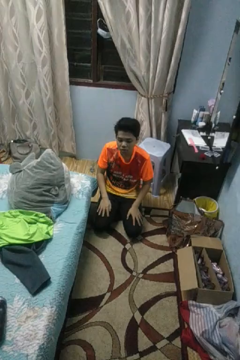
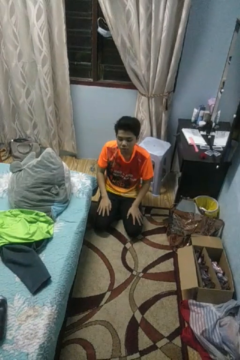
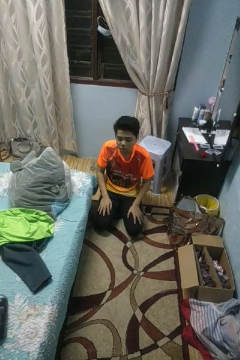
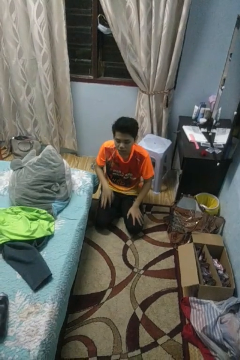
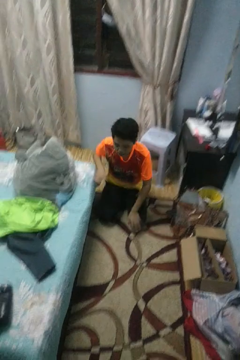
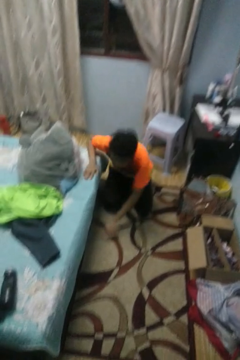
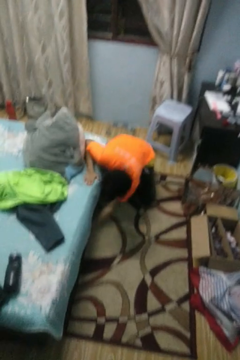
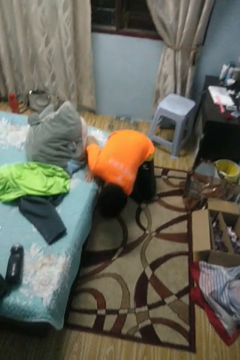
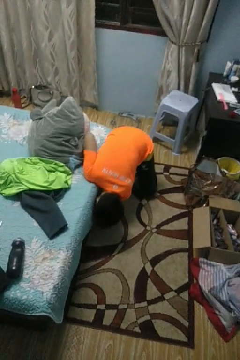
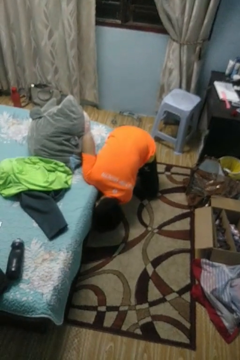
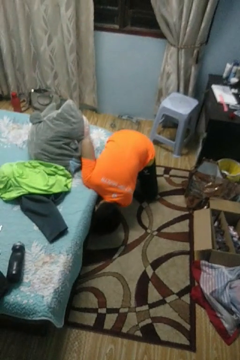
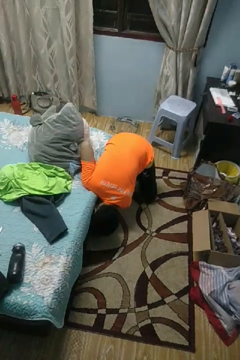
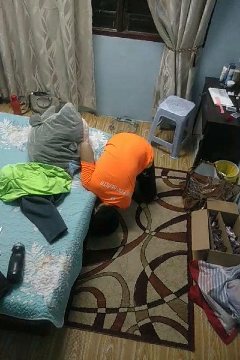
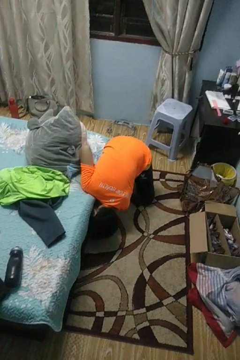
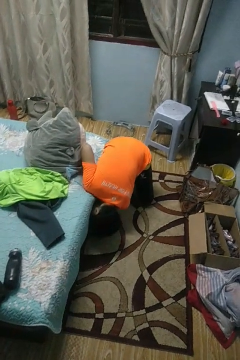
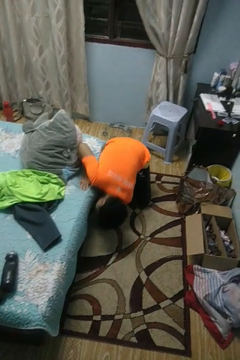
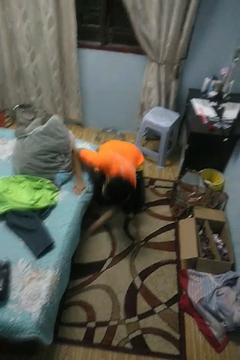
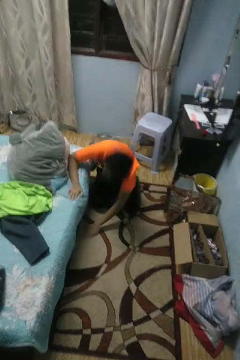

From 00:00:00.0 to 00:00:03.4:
person searches under bed

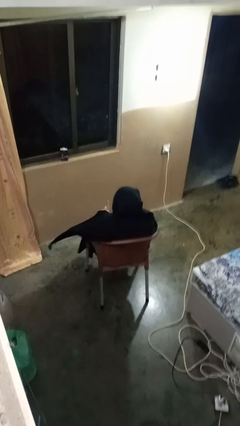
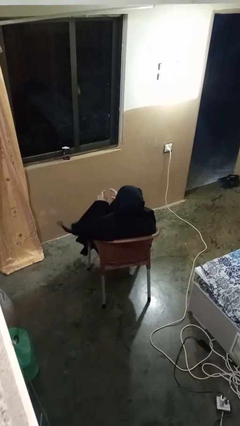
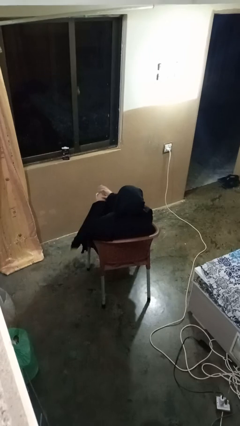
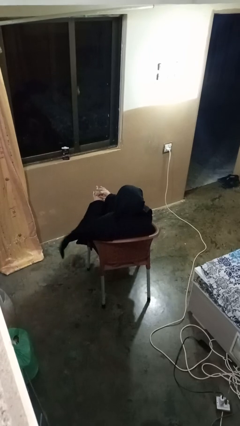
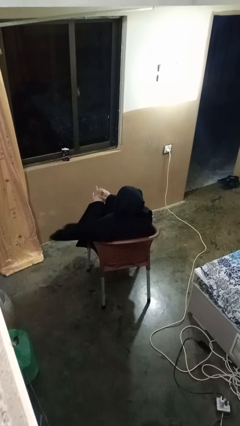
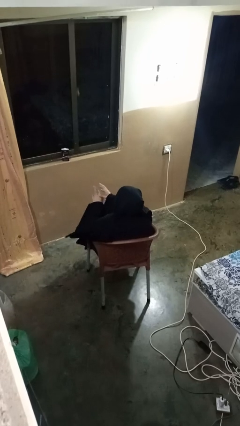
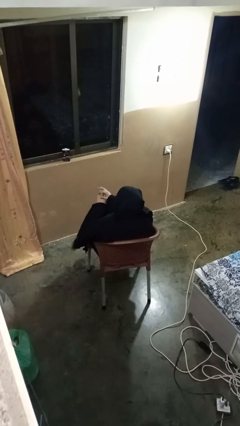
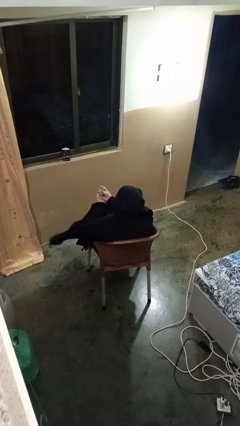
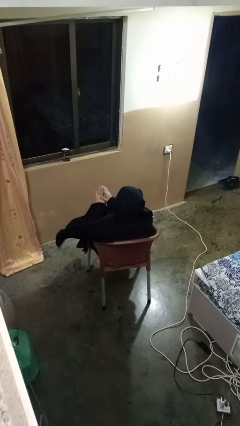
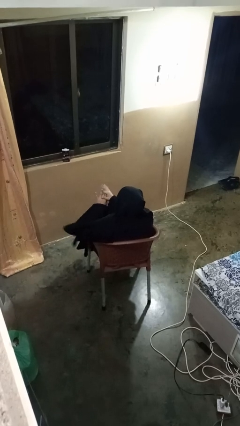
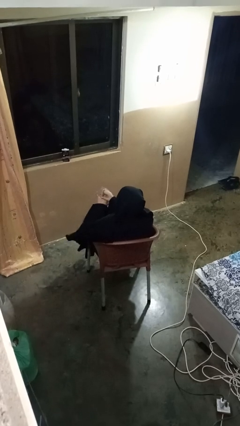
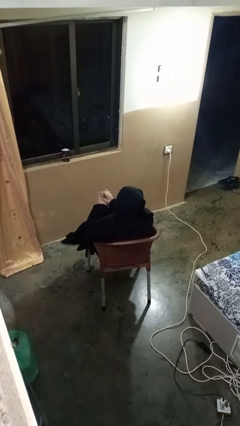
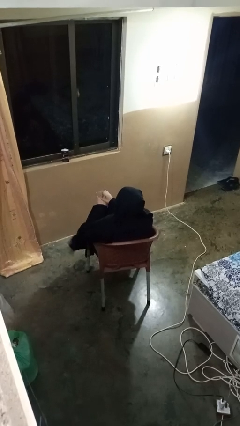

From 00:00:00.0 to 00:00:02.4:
person cracks knuckles

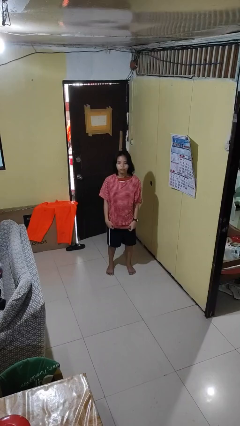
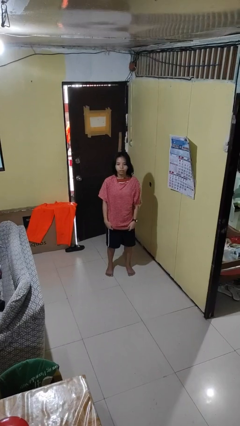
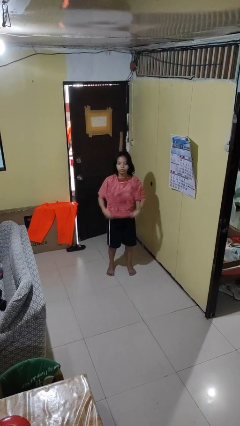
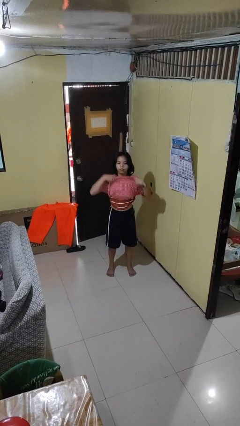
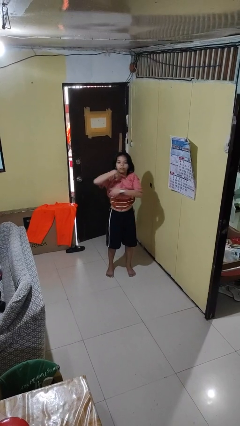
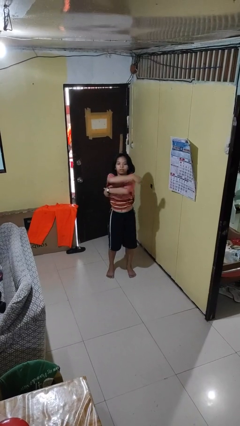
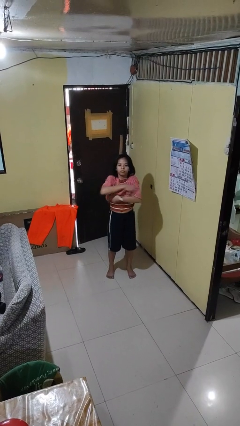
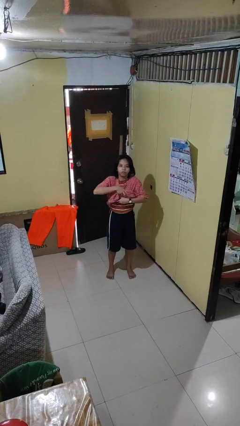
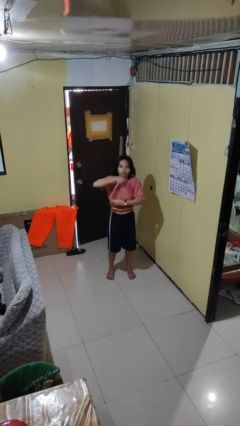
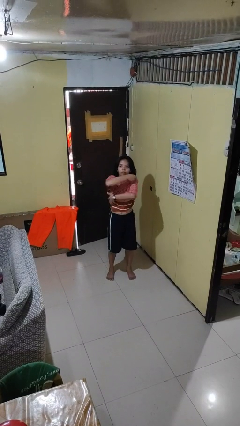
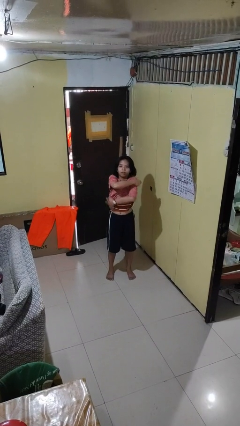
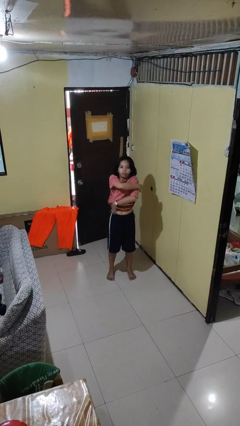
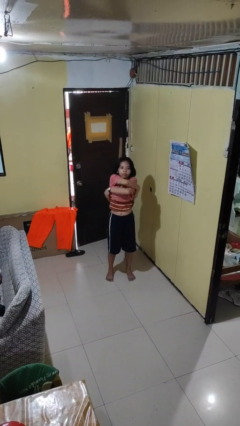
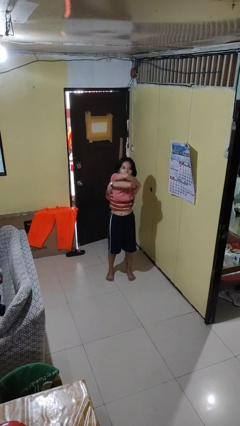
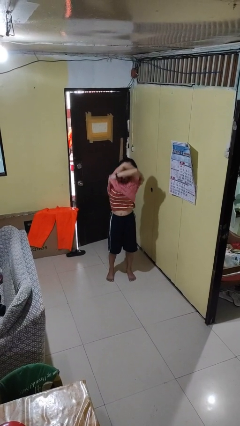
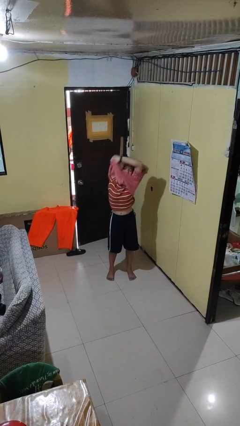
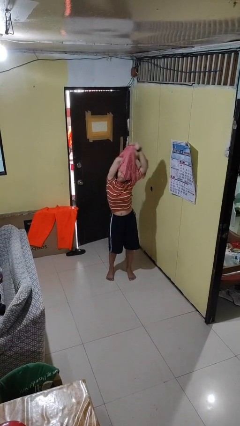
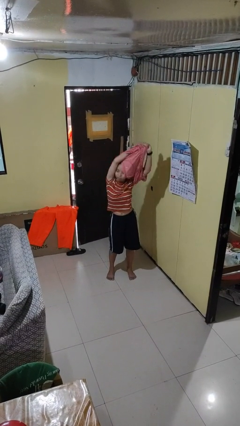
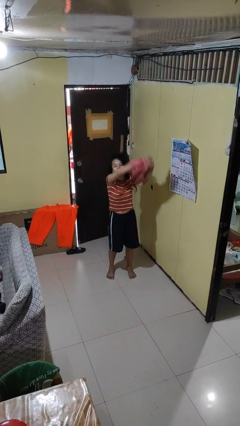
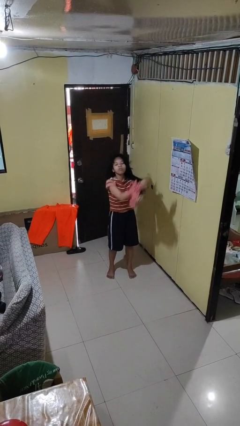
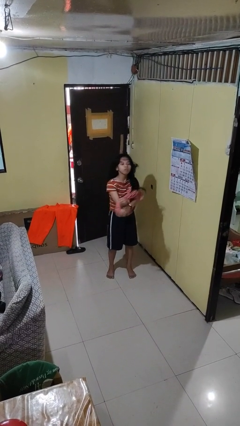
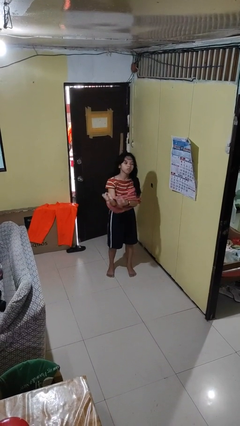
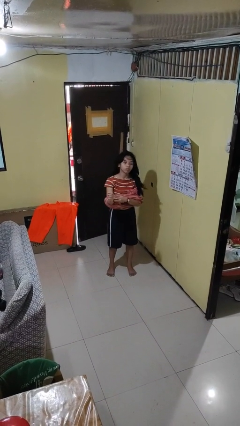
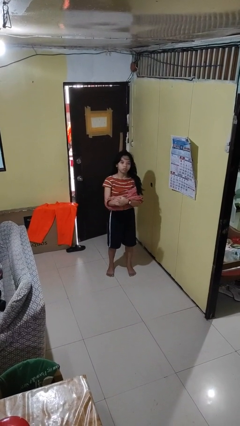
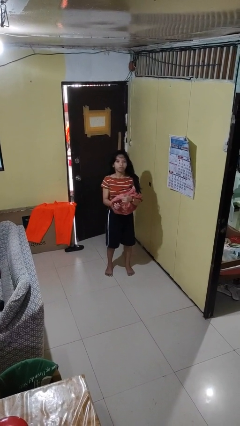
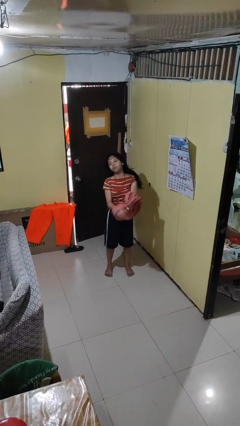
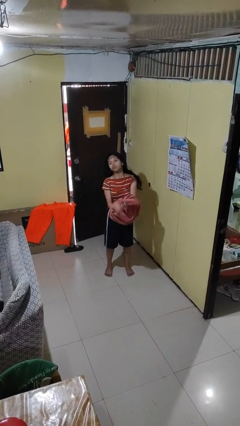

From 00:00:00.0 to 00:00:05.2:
person takes off shirt

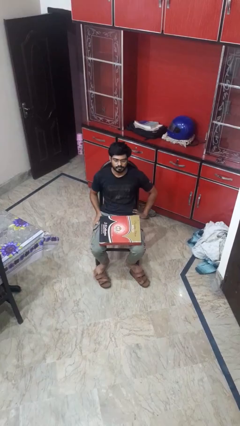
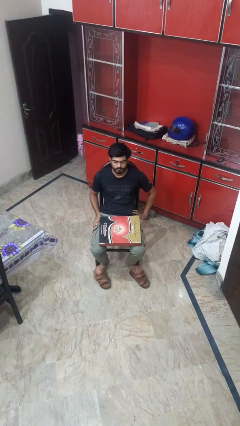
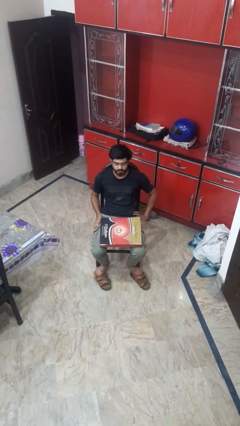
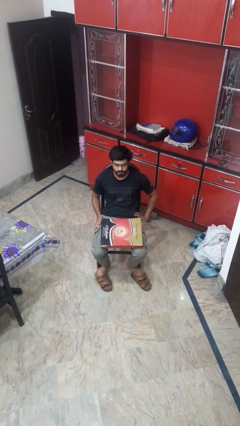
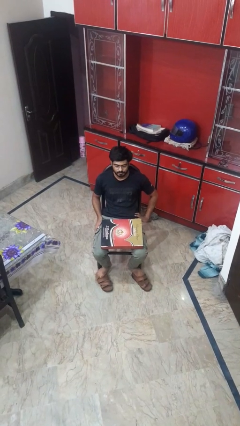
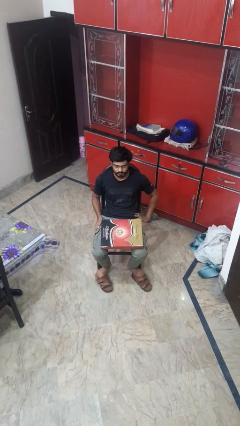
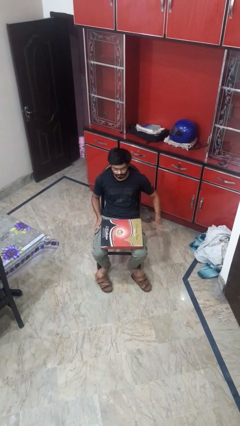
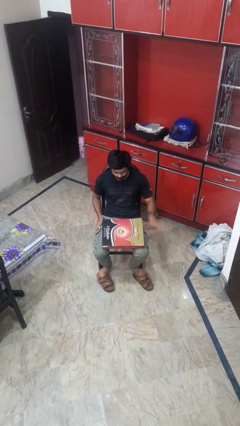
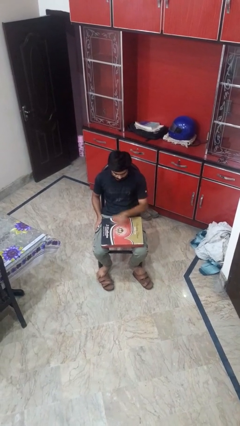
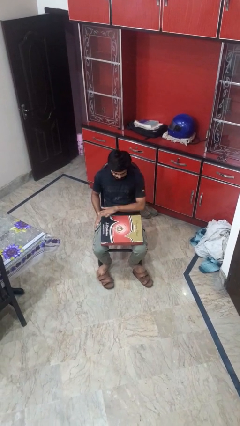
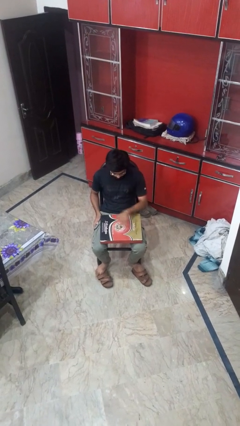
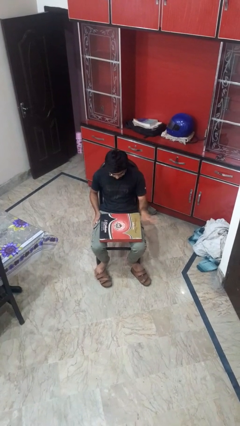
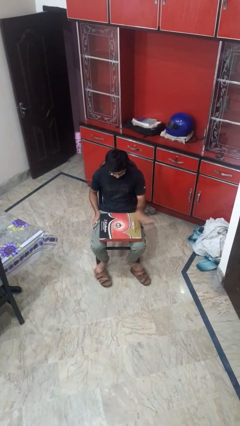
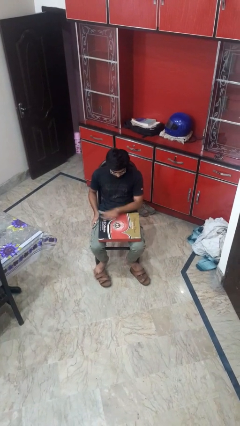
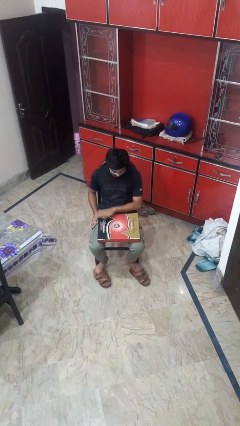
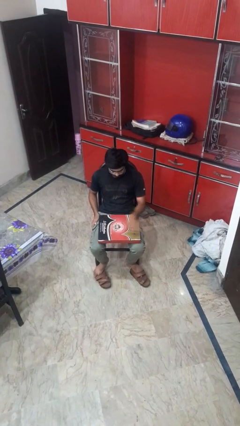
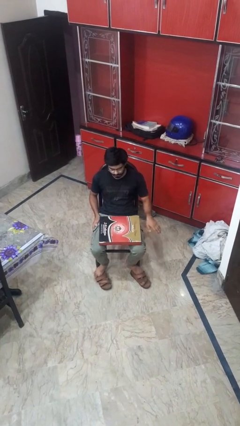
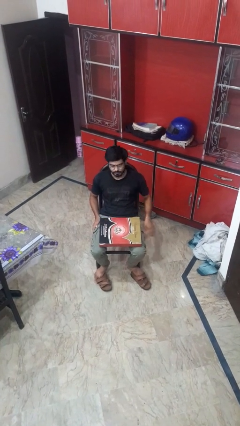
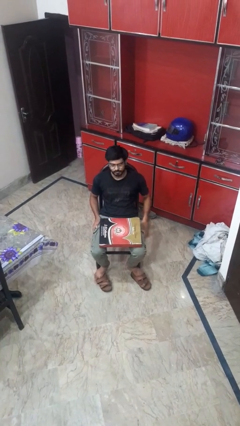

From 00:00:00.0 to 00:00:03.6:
person waves hand over object

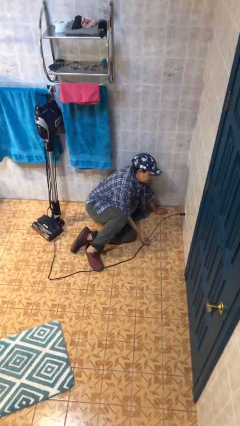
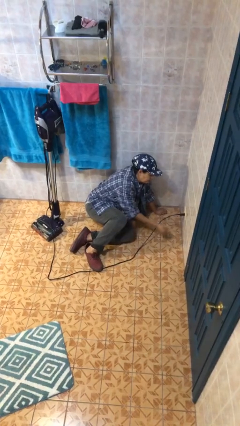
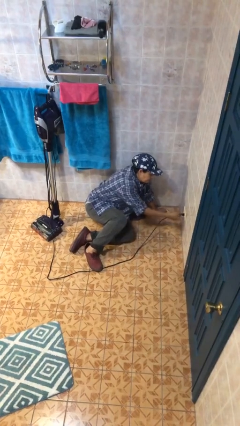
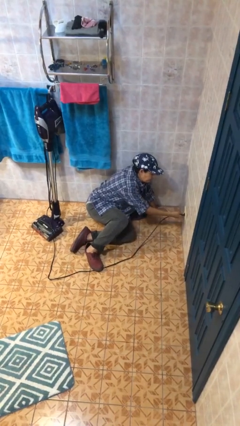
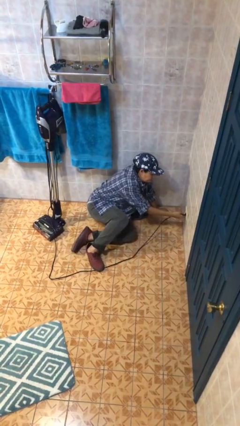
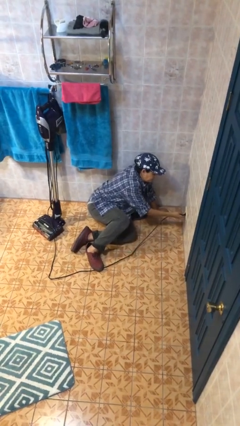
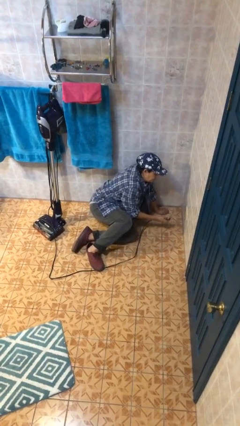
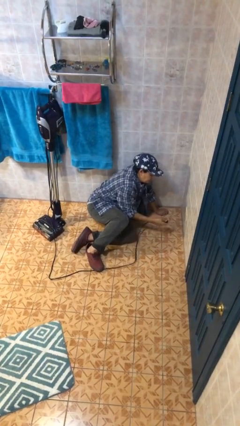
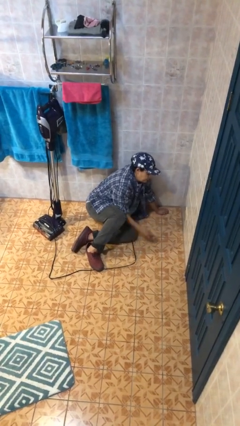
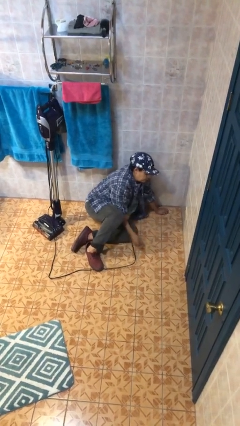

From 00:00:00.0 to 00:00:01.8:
person unplugs from electrical socket

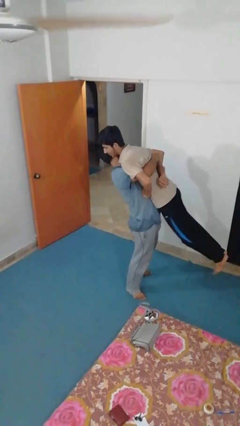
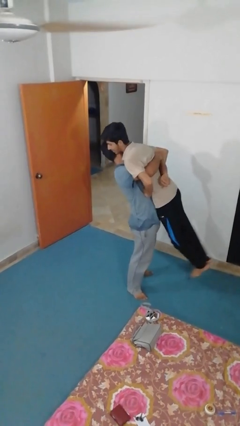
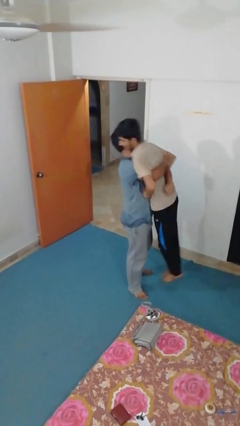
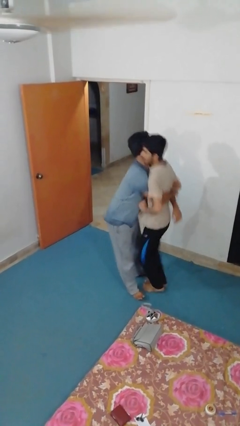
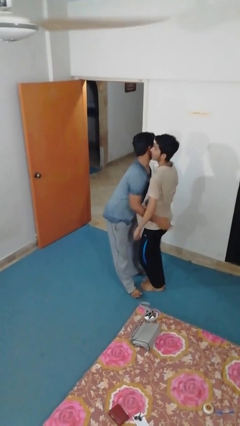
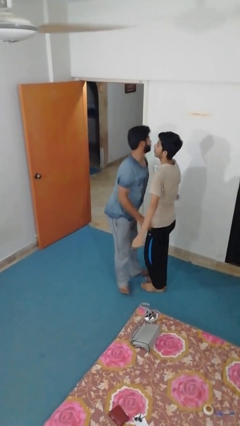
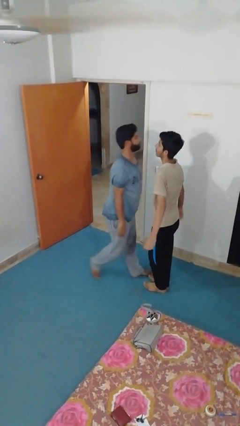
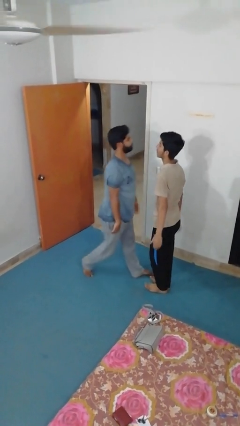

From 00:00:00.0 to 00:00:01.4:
person puts down person
